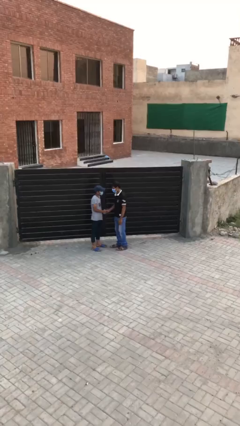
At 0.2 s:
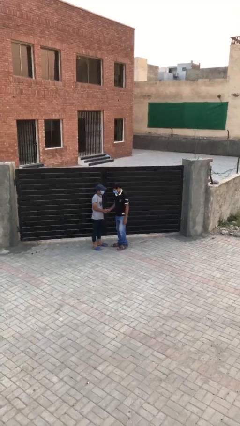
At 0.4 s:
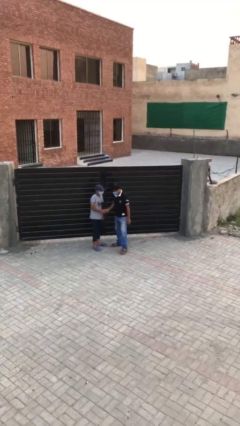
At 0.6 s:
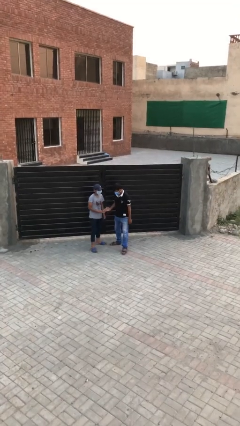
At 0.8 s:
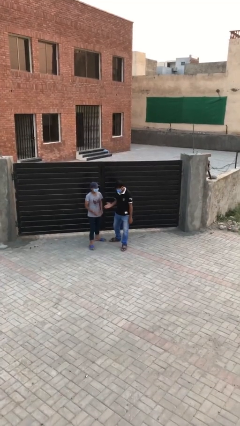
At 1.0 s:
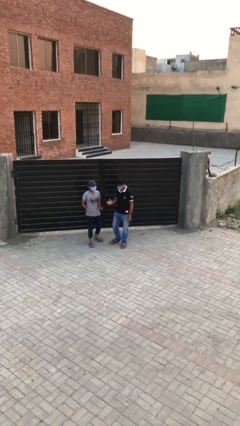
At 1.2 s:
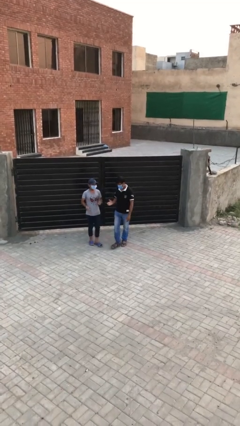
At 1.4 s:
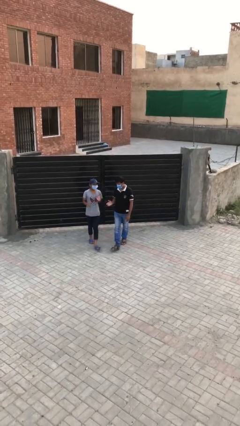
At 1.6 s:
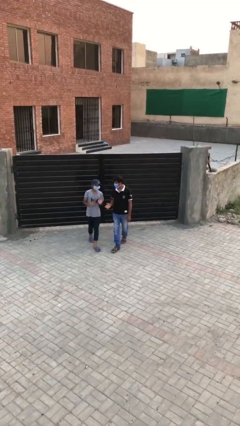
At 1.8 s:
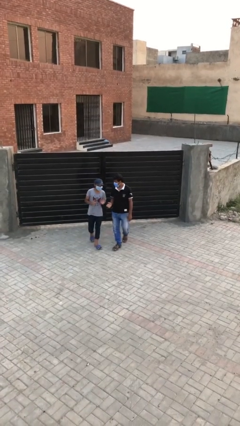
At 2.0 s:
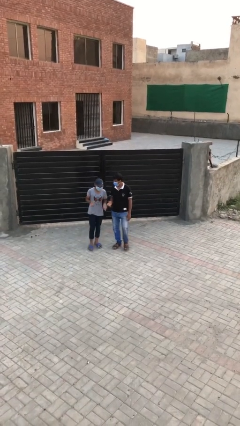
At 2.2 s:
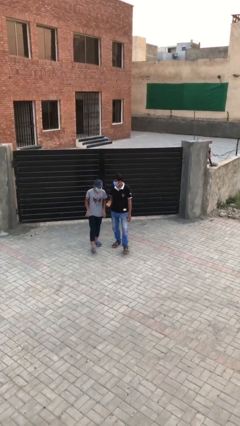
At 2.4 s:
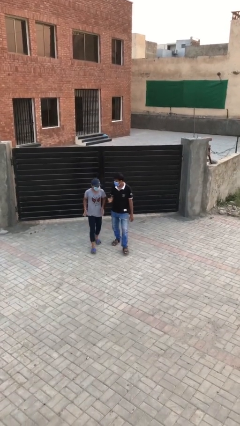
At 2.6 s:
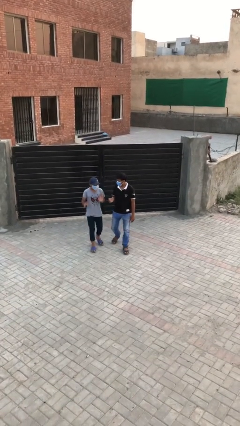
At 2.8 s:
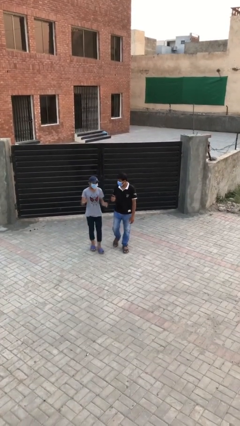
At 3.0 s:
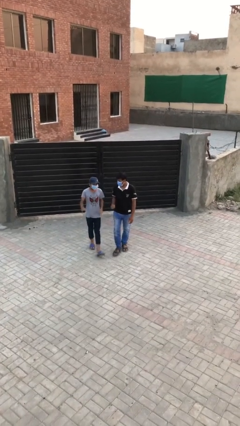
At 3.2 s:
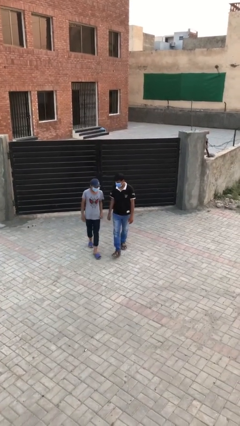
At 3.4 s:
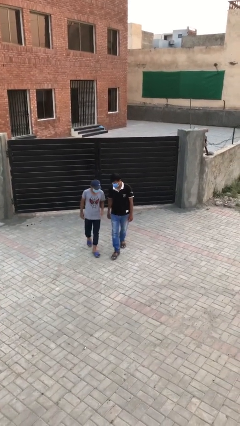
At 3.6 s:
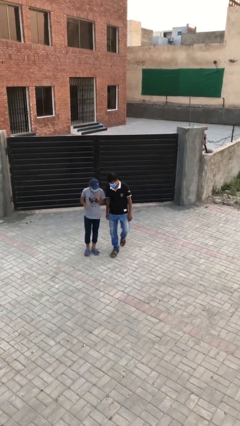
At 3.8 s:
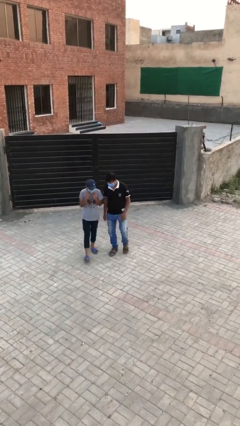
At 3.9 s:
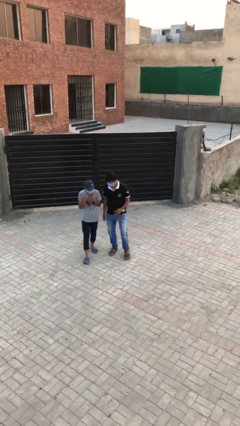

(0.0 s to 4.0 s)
person talks to person

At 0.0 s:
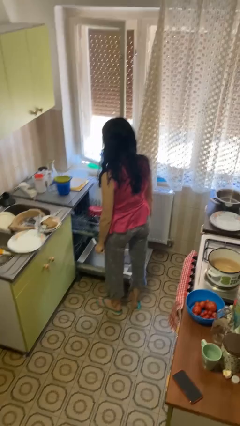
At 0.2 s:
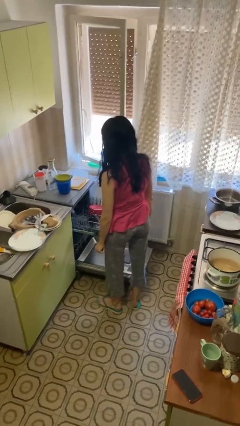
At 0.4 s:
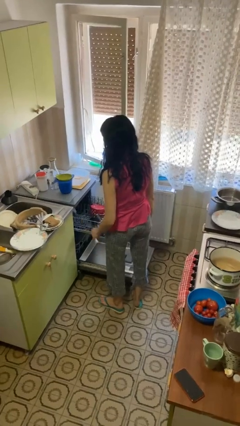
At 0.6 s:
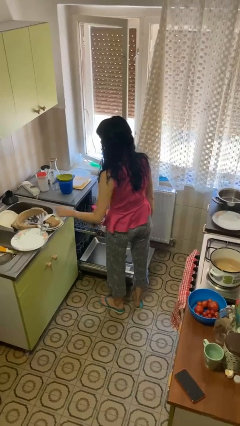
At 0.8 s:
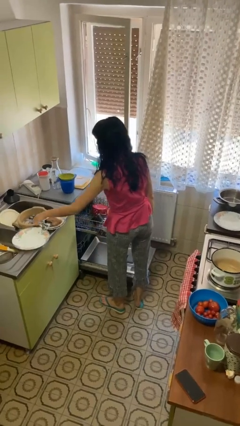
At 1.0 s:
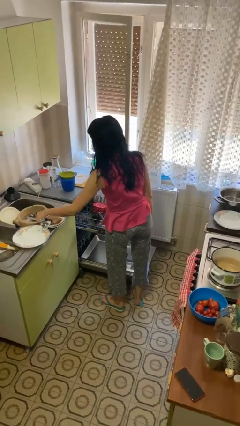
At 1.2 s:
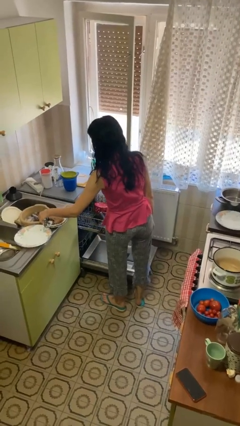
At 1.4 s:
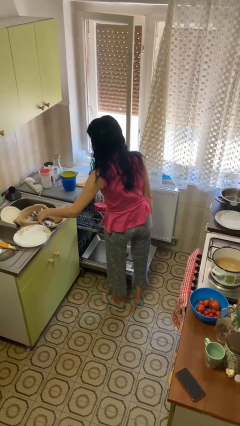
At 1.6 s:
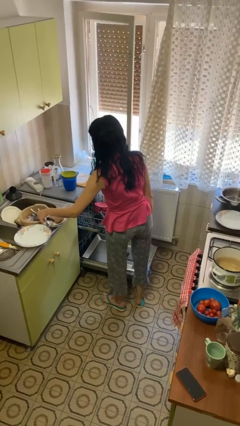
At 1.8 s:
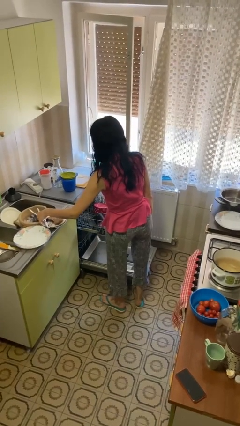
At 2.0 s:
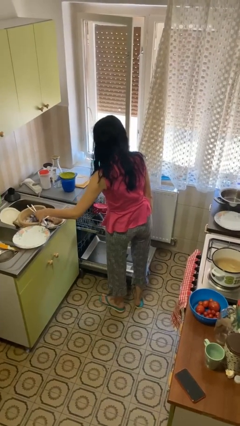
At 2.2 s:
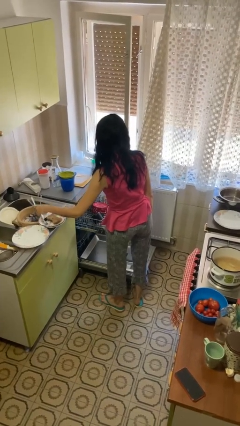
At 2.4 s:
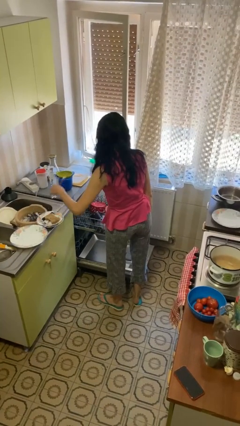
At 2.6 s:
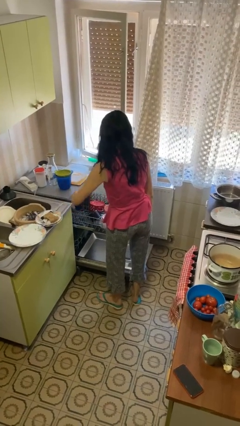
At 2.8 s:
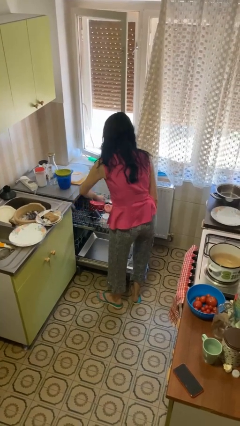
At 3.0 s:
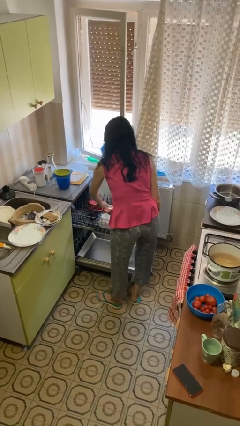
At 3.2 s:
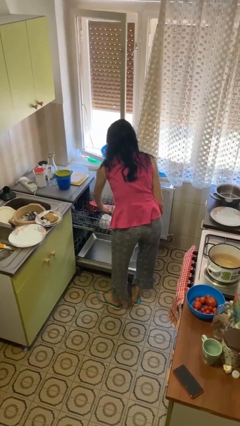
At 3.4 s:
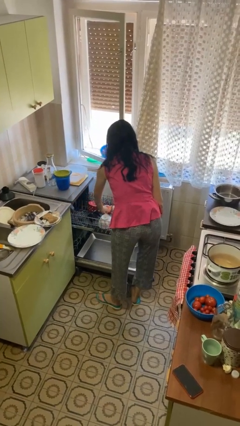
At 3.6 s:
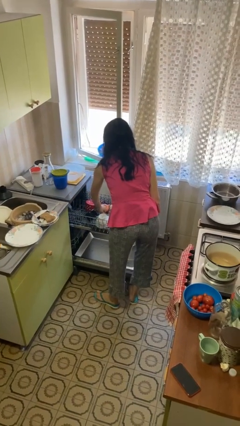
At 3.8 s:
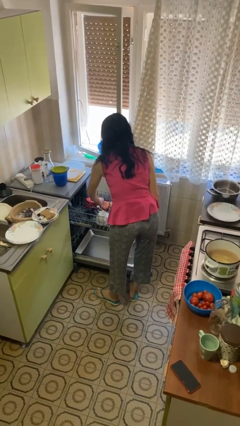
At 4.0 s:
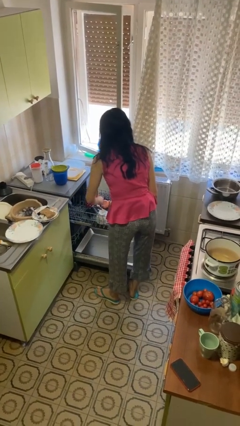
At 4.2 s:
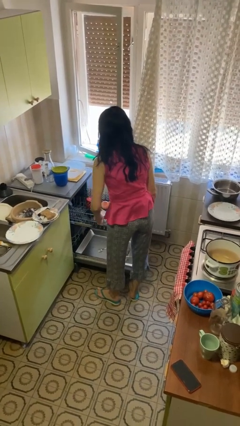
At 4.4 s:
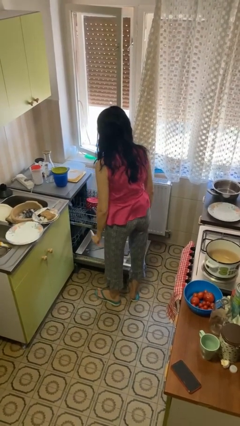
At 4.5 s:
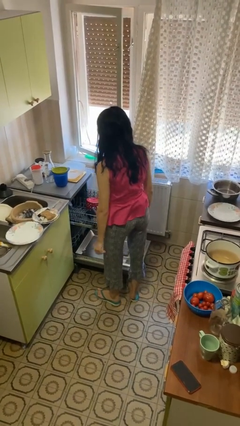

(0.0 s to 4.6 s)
person loads dishwasher

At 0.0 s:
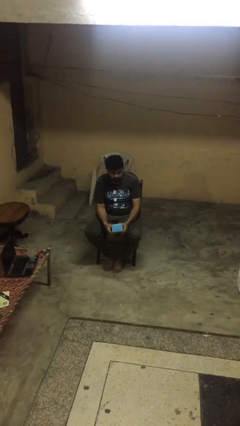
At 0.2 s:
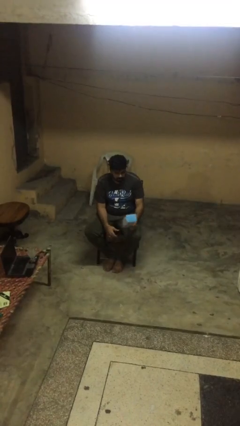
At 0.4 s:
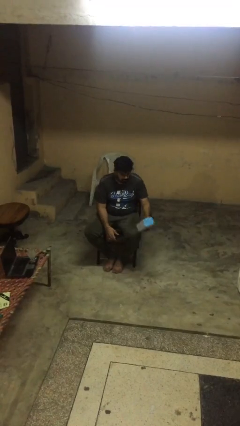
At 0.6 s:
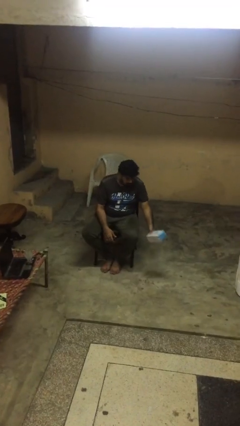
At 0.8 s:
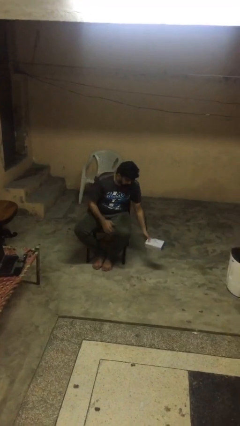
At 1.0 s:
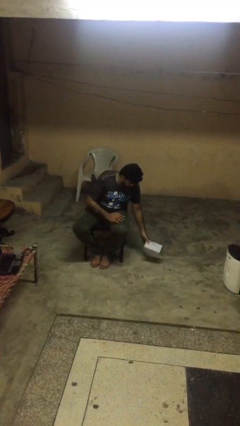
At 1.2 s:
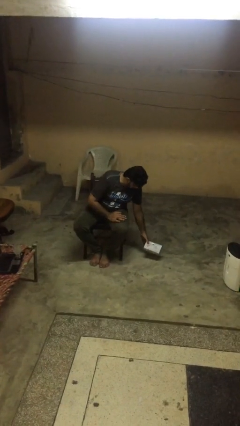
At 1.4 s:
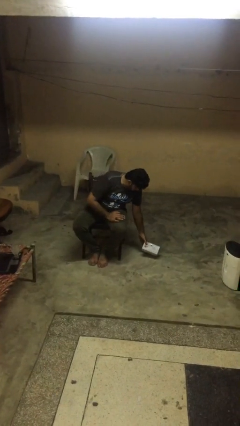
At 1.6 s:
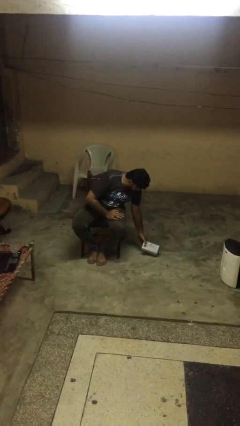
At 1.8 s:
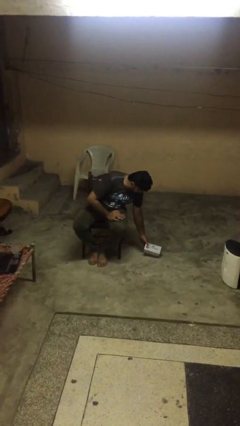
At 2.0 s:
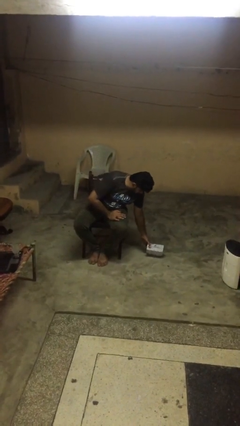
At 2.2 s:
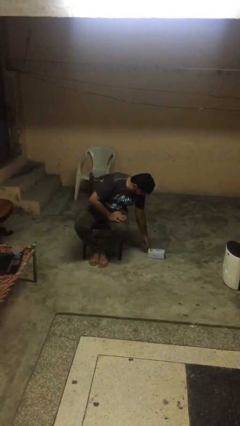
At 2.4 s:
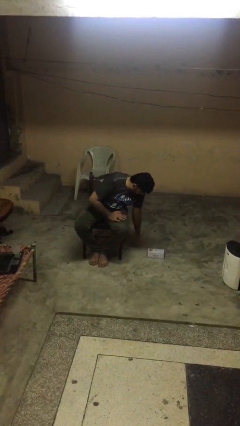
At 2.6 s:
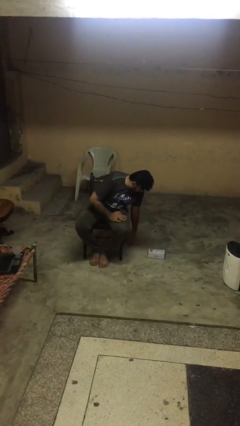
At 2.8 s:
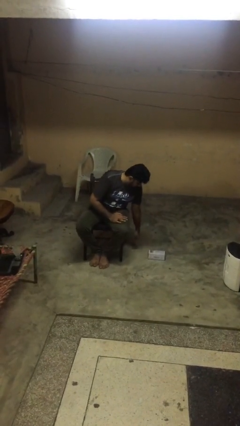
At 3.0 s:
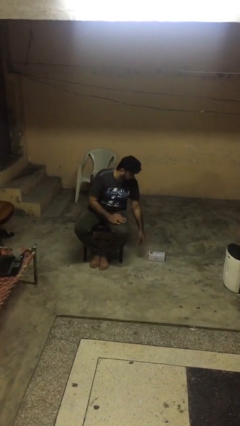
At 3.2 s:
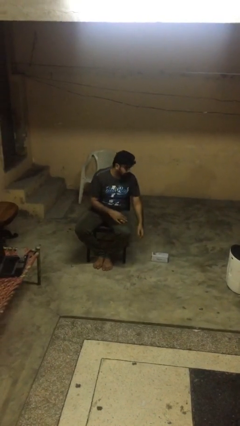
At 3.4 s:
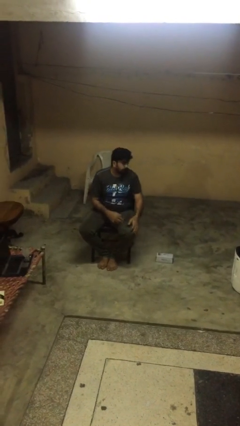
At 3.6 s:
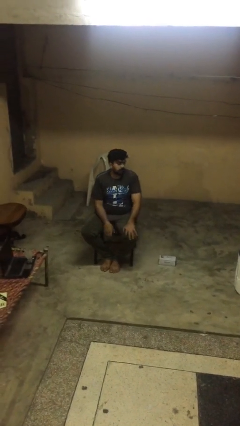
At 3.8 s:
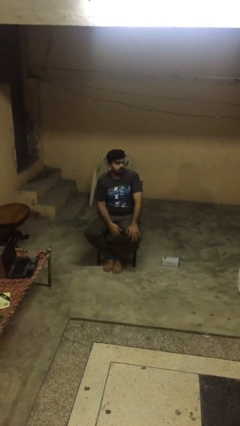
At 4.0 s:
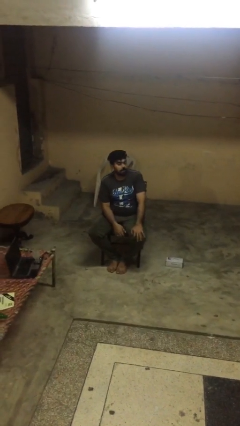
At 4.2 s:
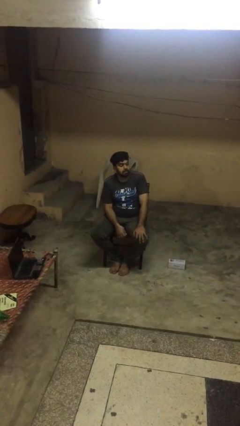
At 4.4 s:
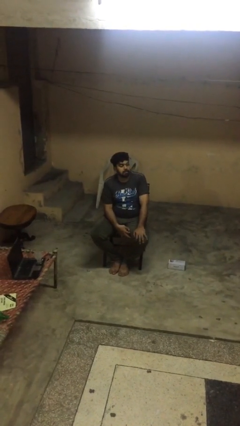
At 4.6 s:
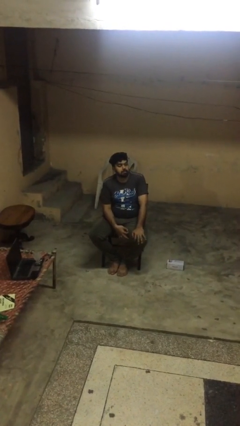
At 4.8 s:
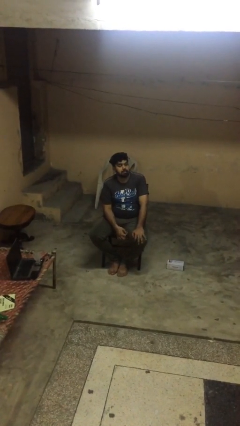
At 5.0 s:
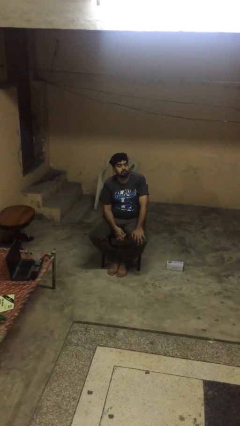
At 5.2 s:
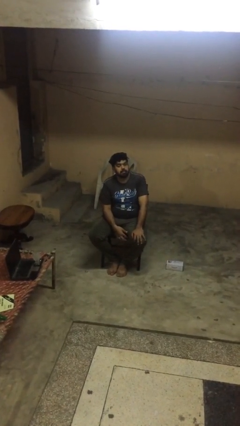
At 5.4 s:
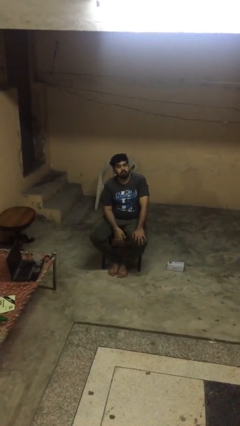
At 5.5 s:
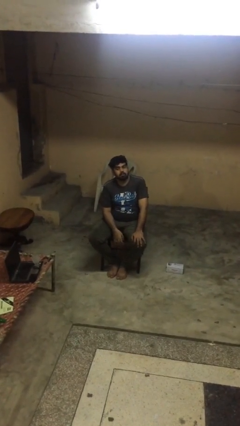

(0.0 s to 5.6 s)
person puts down object on floor

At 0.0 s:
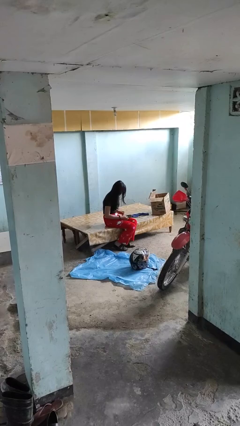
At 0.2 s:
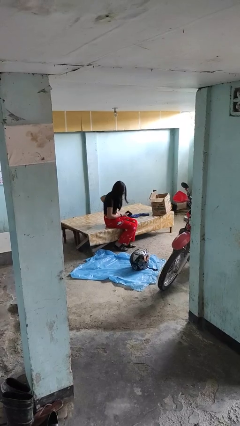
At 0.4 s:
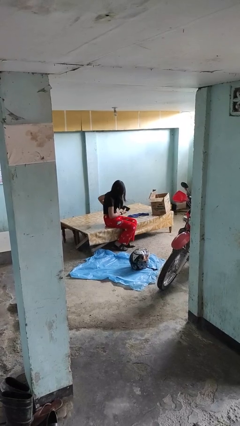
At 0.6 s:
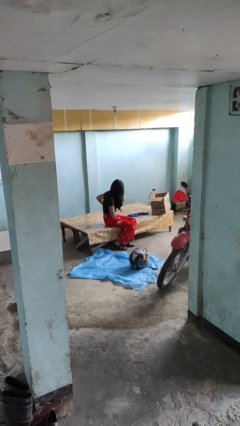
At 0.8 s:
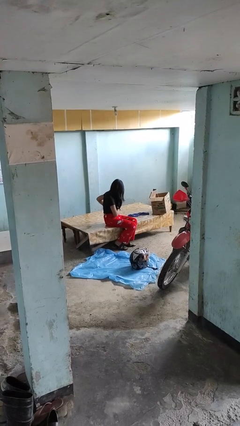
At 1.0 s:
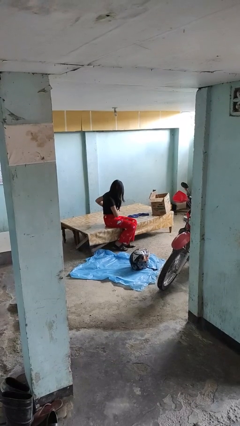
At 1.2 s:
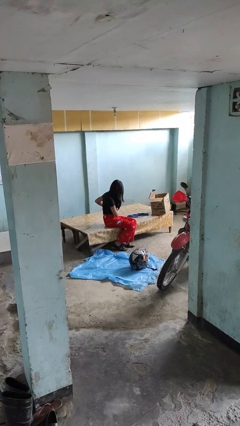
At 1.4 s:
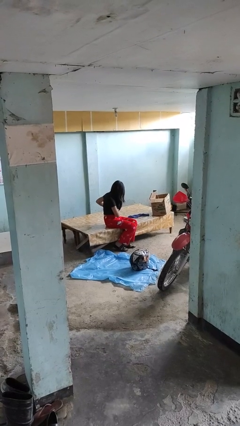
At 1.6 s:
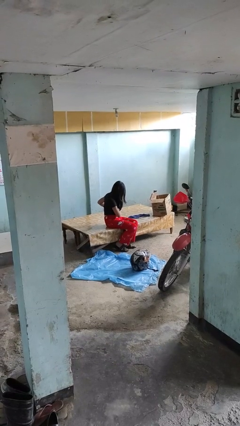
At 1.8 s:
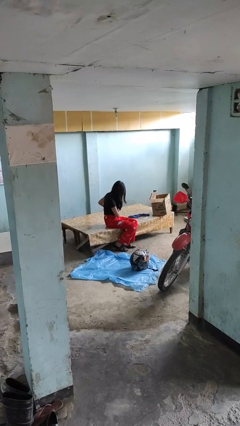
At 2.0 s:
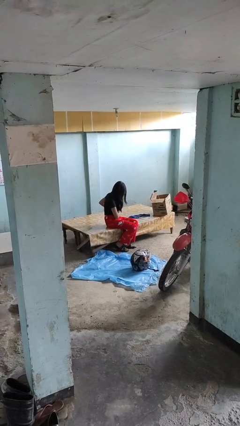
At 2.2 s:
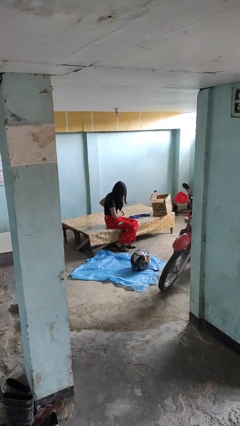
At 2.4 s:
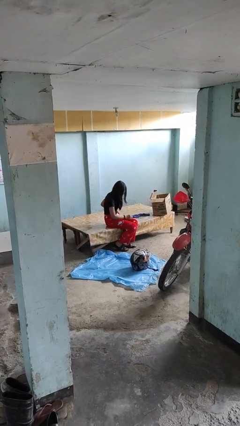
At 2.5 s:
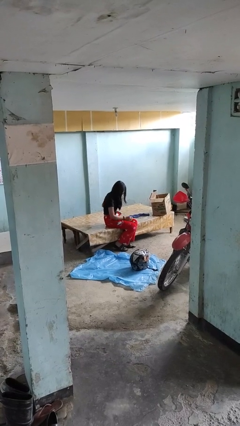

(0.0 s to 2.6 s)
person puts phone into pocket

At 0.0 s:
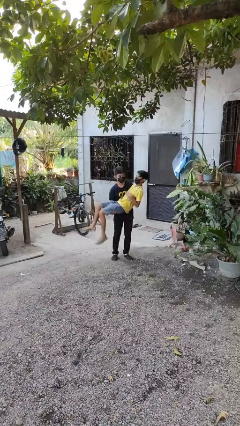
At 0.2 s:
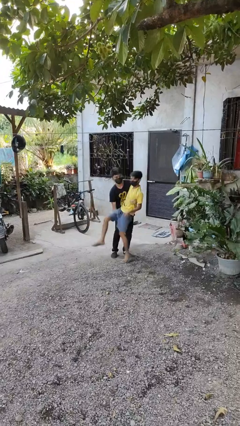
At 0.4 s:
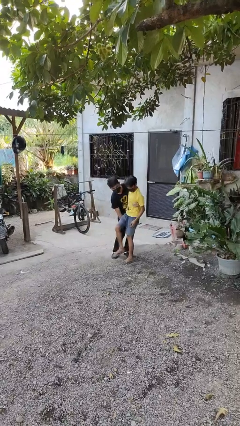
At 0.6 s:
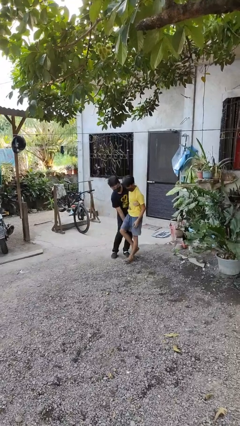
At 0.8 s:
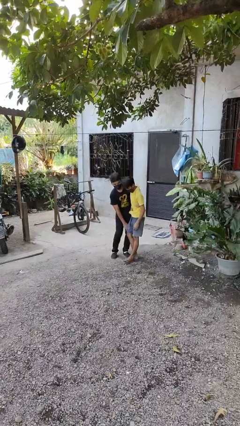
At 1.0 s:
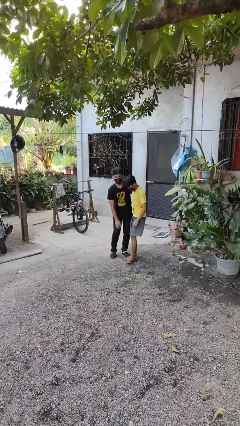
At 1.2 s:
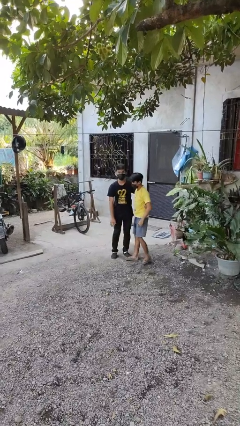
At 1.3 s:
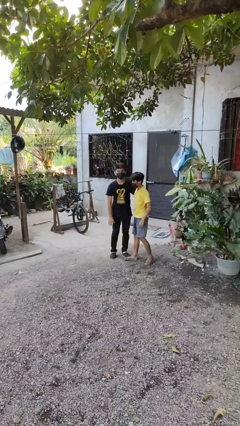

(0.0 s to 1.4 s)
person puts down person
